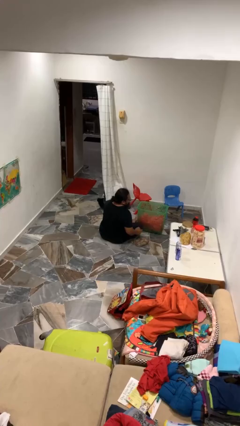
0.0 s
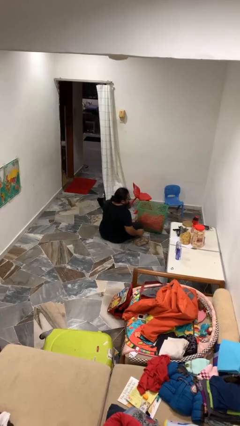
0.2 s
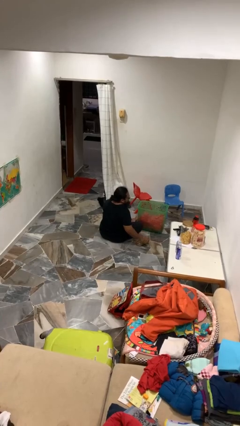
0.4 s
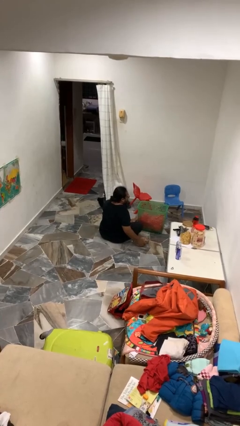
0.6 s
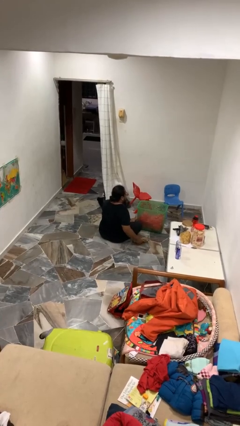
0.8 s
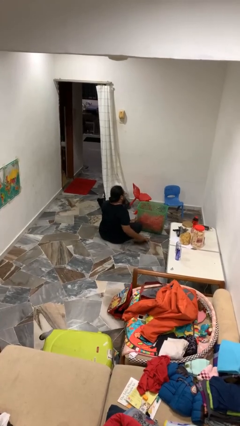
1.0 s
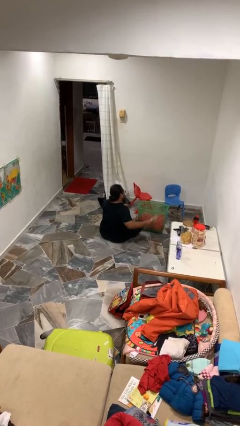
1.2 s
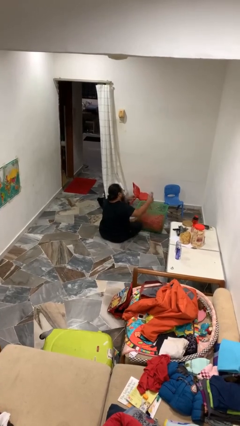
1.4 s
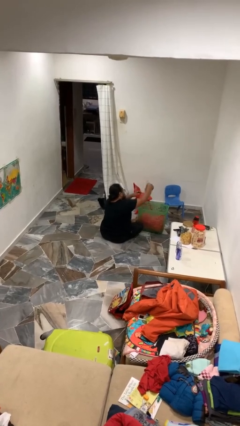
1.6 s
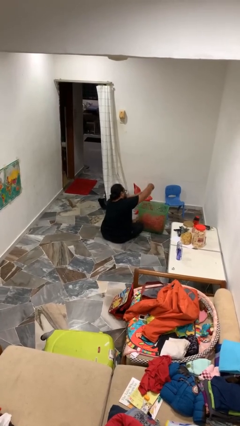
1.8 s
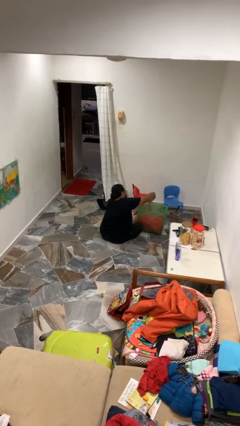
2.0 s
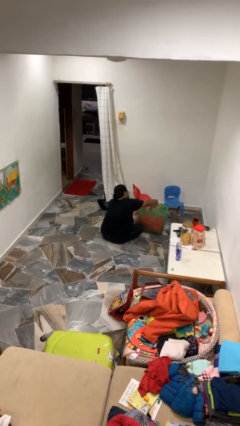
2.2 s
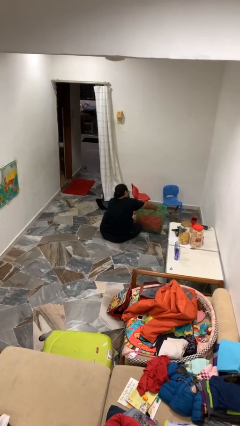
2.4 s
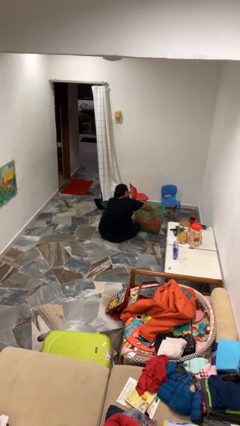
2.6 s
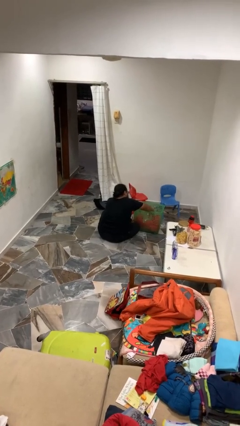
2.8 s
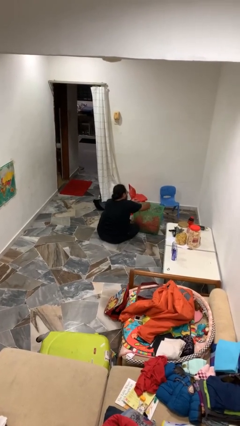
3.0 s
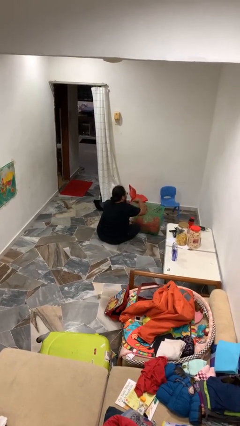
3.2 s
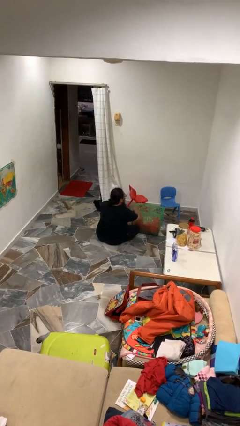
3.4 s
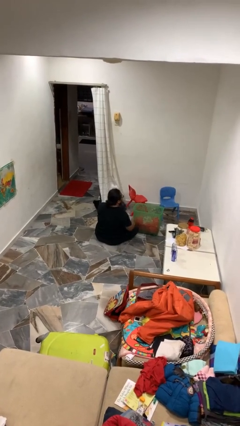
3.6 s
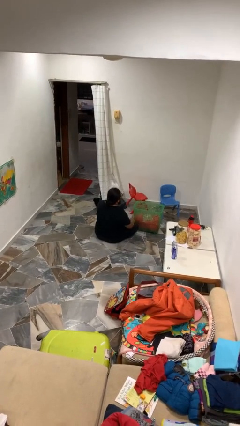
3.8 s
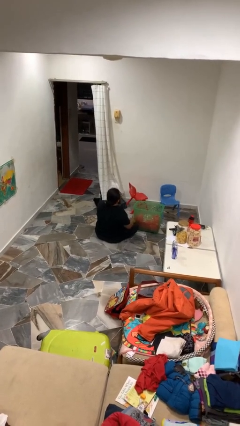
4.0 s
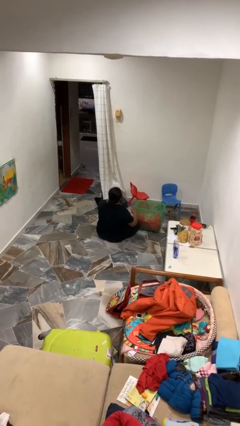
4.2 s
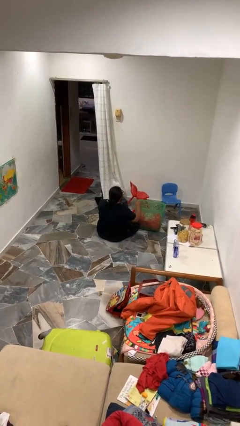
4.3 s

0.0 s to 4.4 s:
person puts object into basket

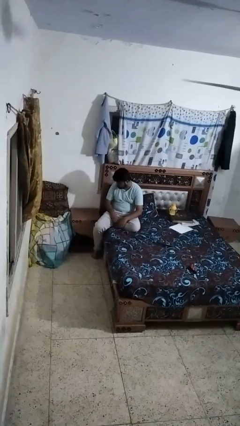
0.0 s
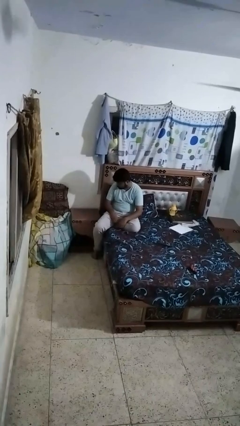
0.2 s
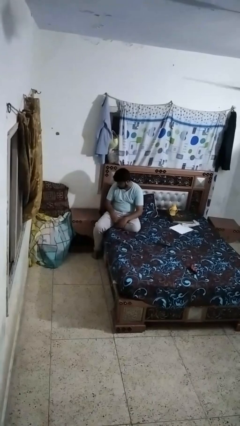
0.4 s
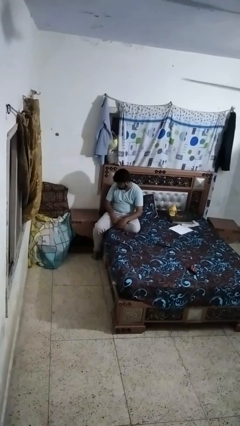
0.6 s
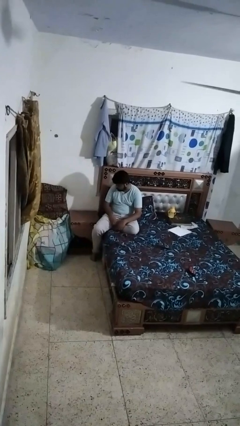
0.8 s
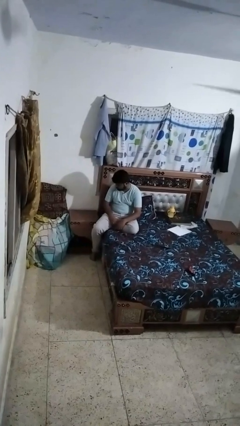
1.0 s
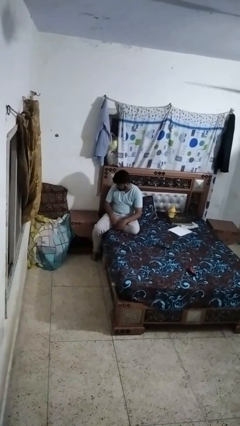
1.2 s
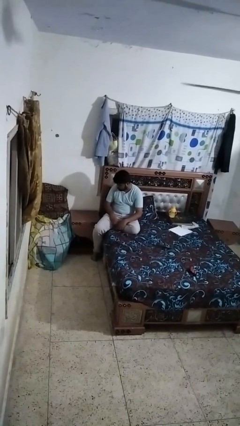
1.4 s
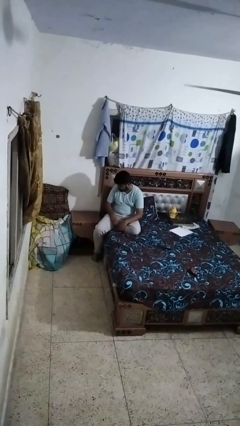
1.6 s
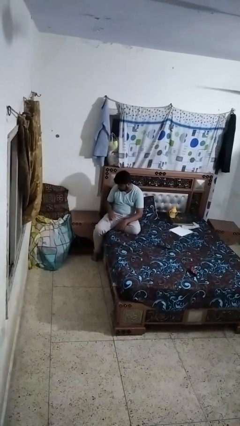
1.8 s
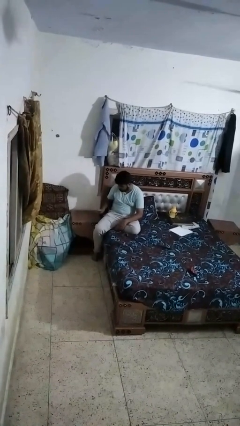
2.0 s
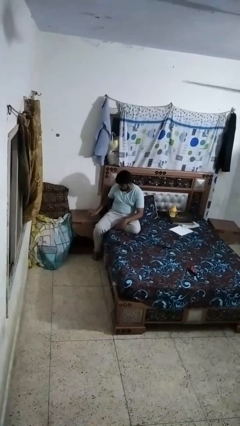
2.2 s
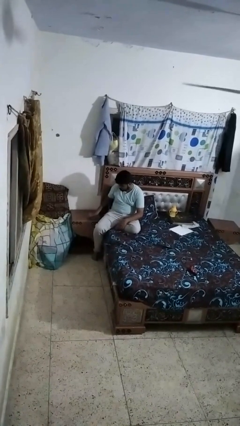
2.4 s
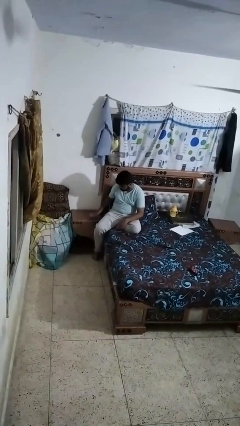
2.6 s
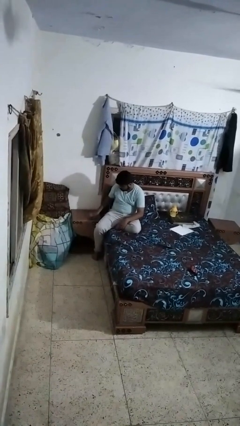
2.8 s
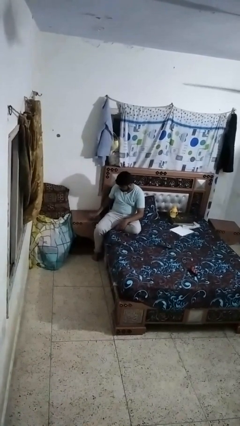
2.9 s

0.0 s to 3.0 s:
person taps object with finger

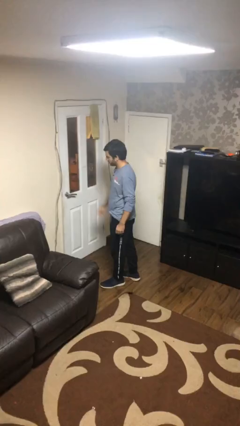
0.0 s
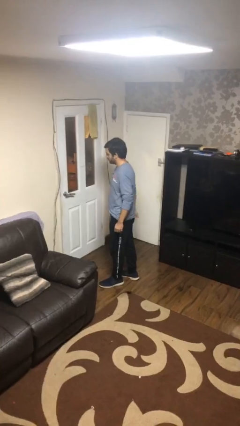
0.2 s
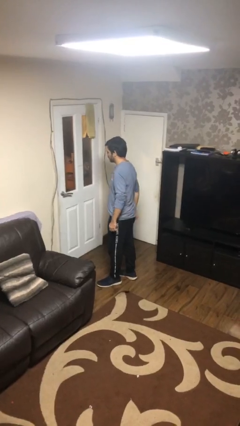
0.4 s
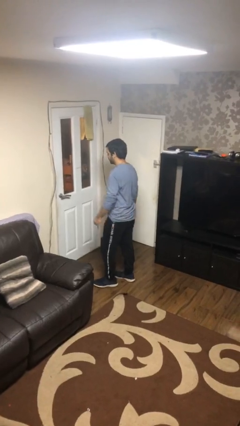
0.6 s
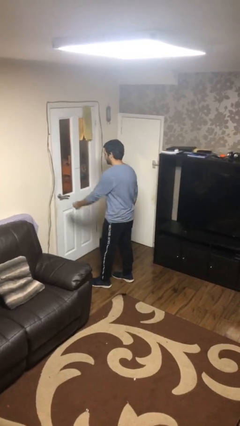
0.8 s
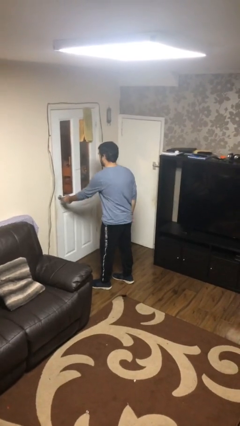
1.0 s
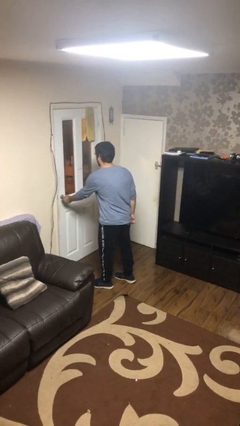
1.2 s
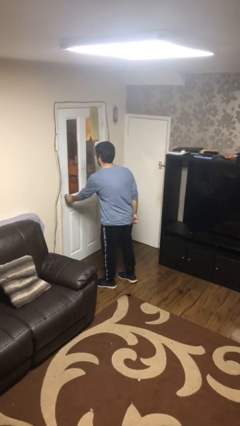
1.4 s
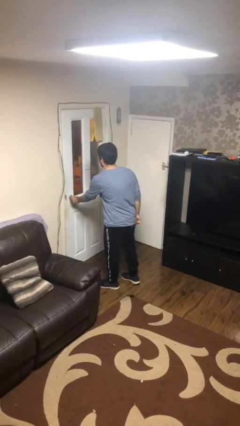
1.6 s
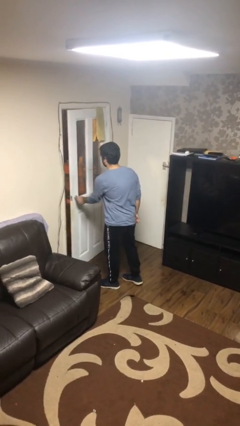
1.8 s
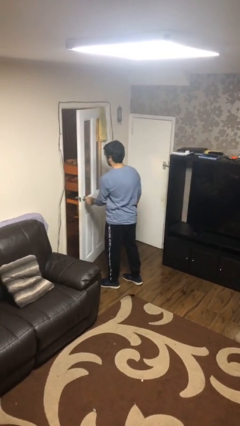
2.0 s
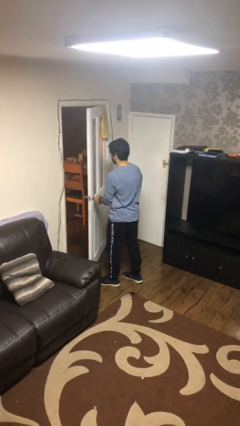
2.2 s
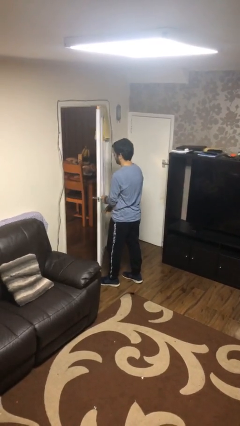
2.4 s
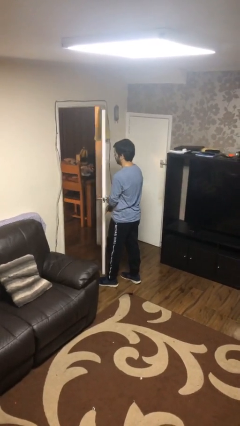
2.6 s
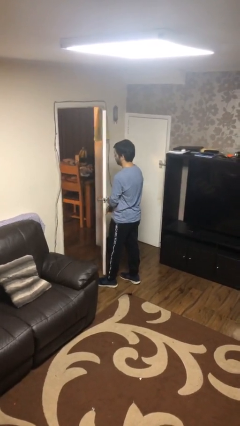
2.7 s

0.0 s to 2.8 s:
person opens facility door

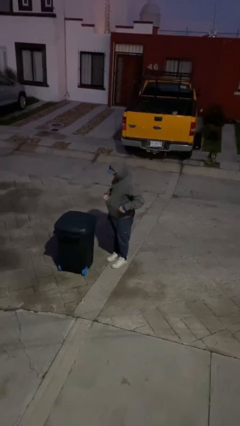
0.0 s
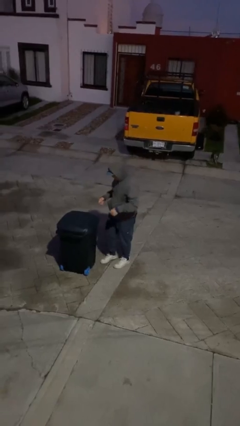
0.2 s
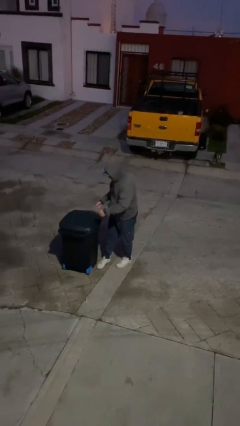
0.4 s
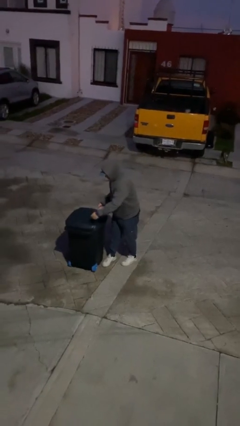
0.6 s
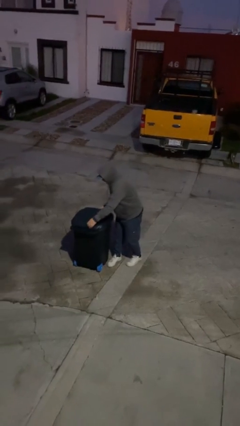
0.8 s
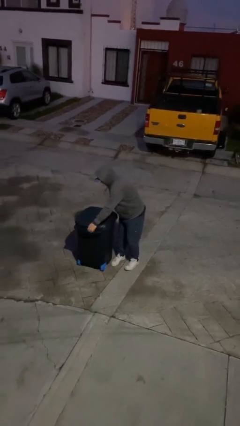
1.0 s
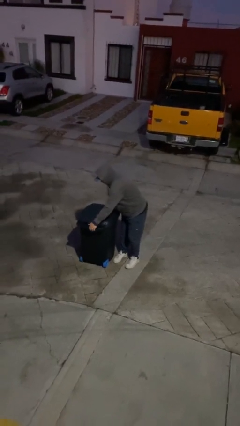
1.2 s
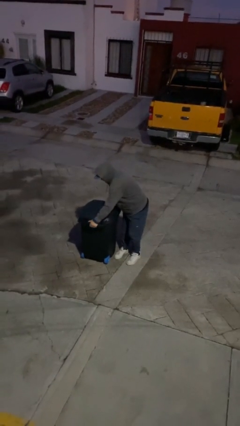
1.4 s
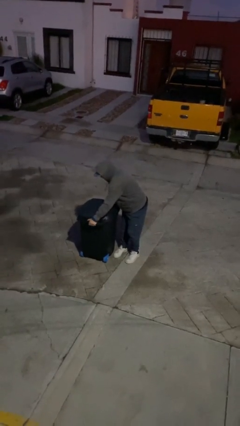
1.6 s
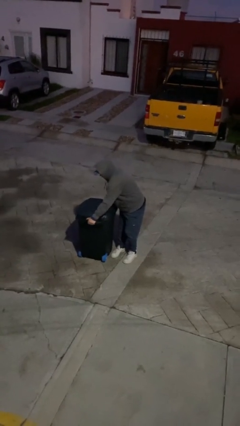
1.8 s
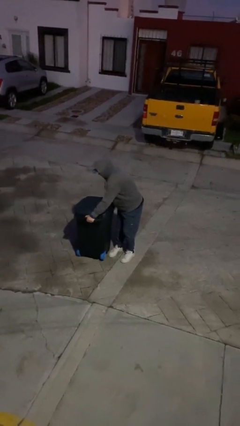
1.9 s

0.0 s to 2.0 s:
person picks up object from floor

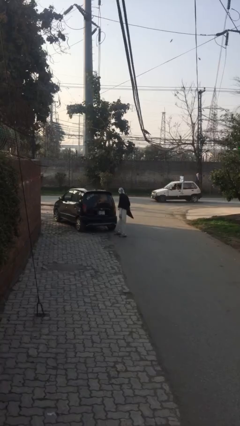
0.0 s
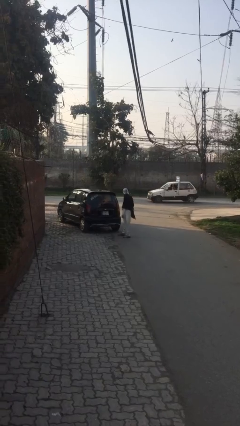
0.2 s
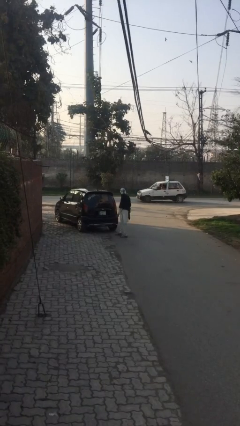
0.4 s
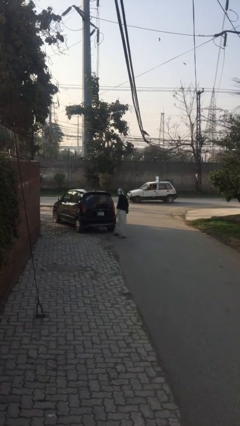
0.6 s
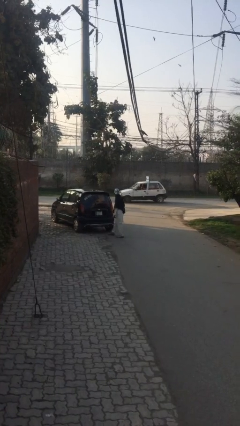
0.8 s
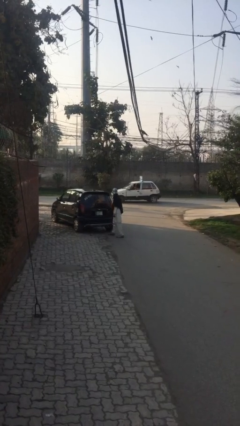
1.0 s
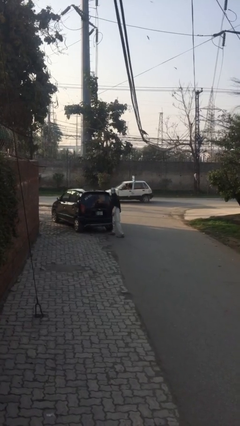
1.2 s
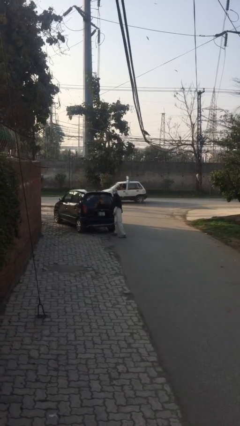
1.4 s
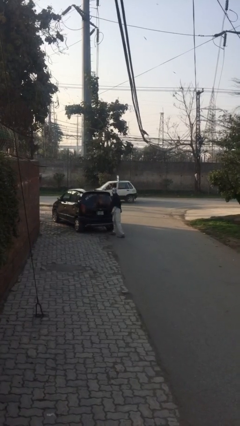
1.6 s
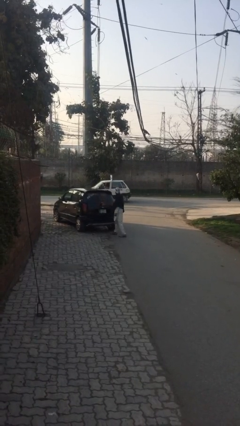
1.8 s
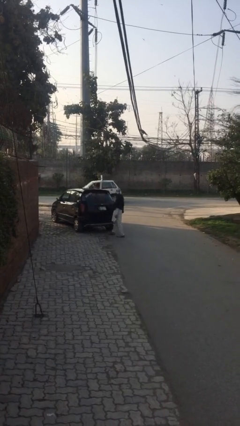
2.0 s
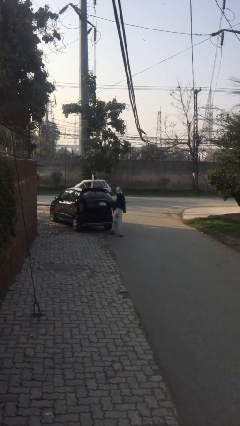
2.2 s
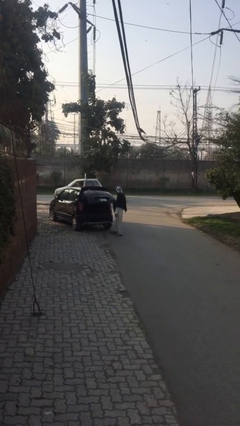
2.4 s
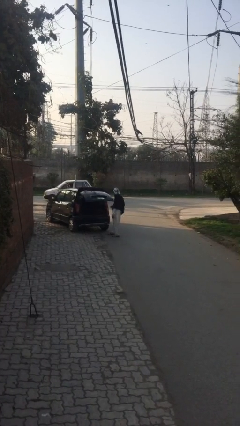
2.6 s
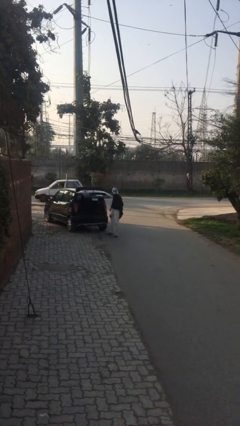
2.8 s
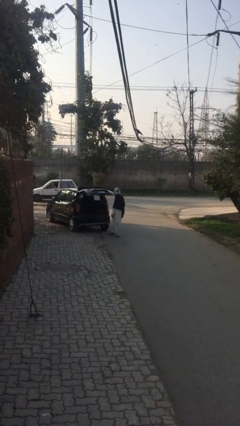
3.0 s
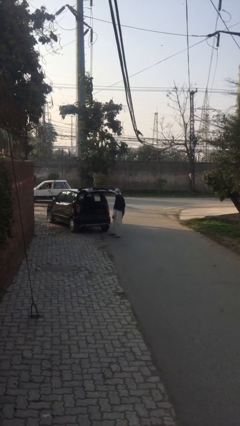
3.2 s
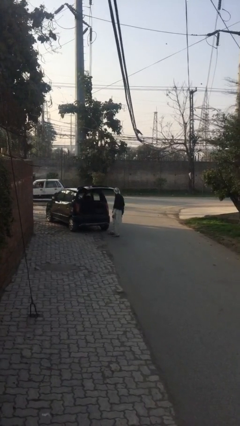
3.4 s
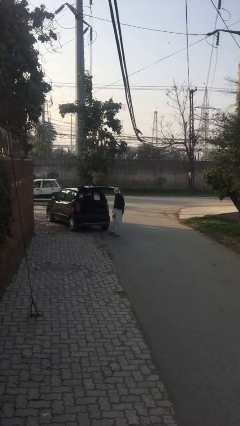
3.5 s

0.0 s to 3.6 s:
person opens car trunk

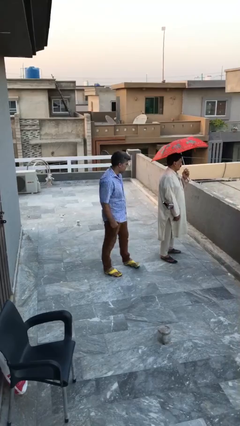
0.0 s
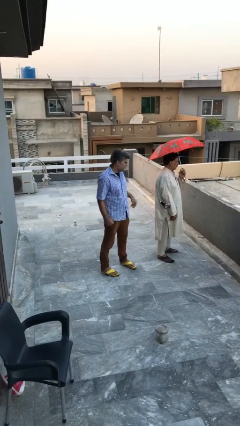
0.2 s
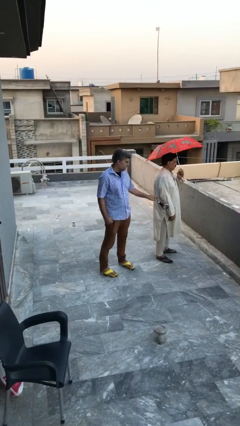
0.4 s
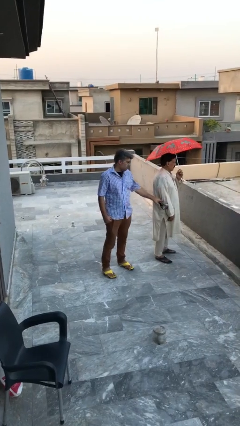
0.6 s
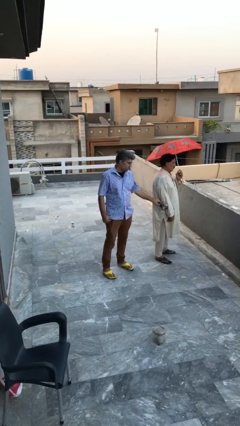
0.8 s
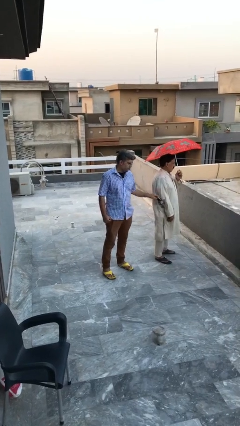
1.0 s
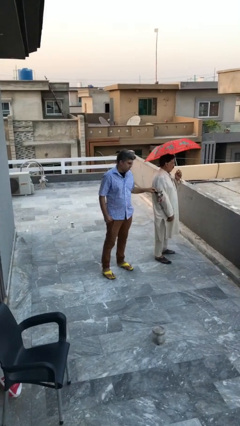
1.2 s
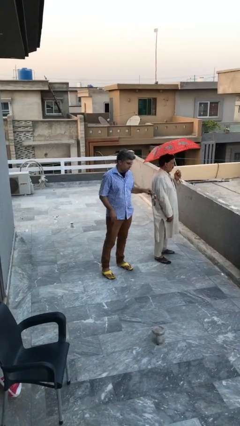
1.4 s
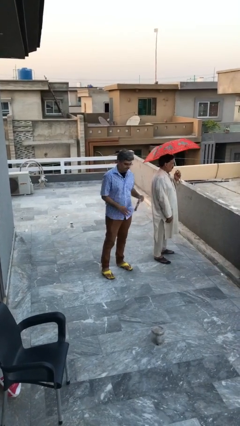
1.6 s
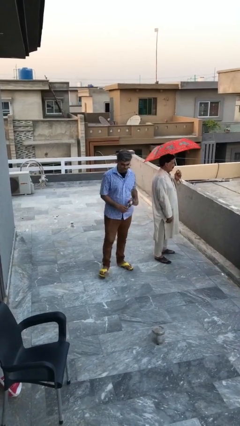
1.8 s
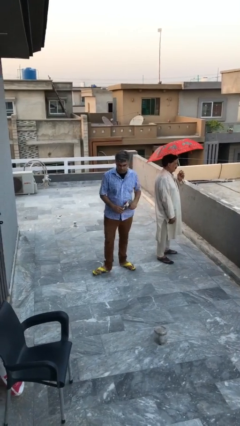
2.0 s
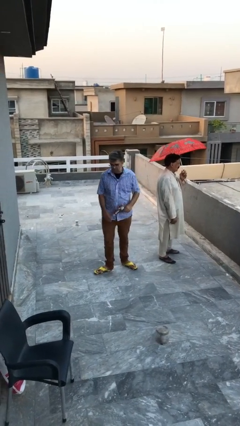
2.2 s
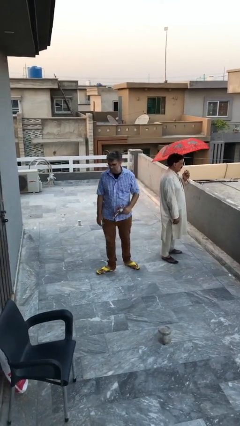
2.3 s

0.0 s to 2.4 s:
person steals object from person
